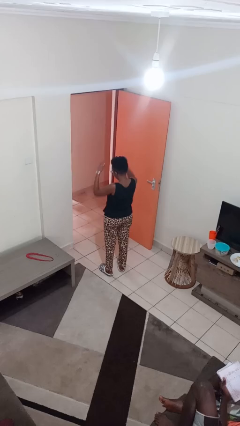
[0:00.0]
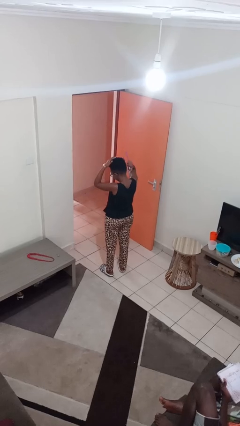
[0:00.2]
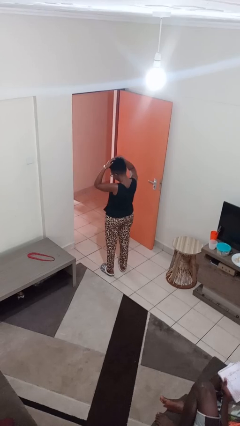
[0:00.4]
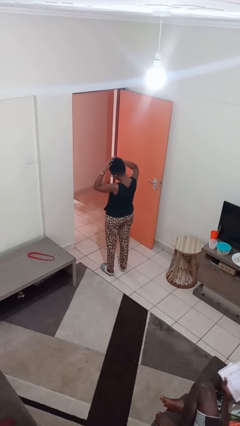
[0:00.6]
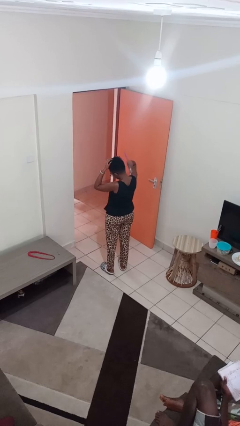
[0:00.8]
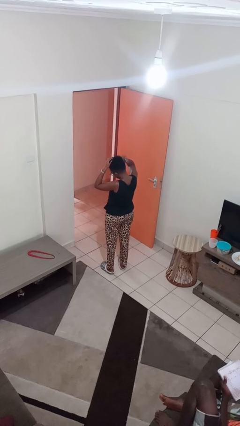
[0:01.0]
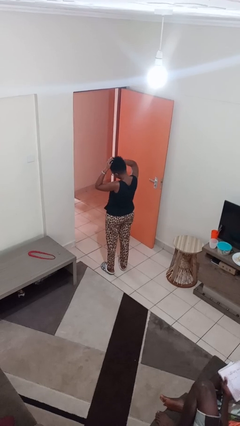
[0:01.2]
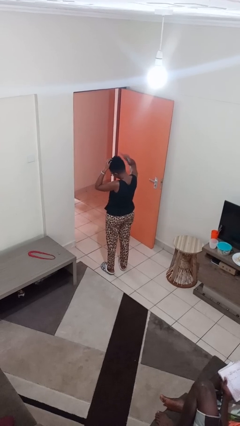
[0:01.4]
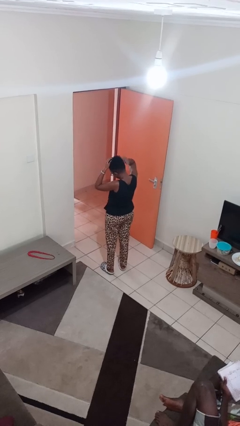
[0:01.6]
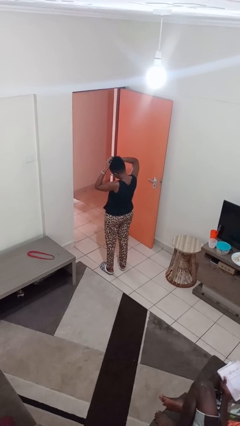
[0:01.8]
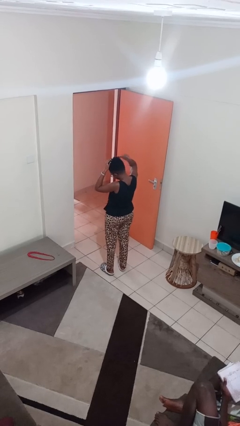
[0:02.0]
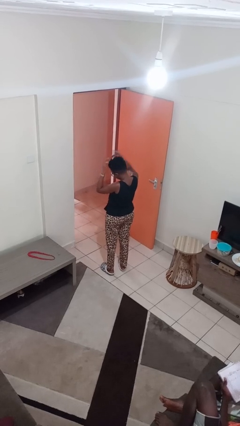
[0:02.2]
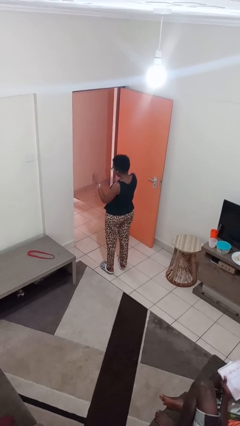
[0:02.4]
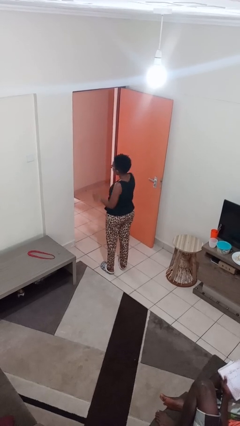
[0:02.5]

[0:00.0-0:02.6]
person brushes hair

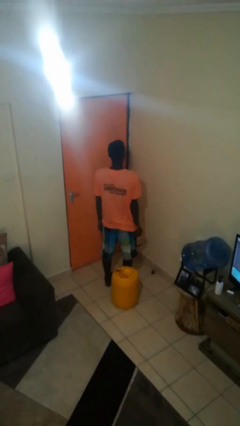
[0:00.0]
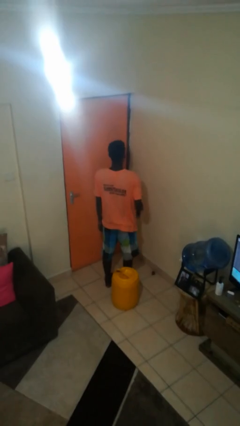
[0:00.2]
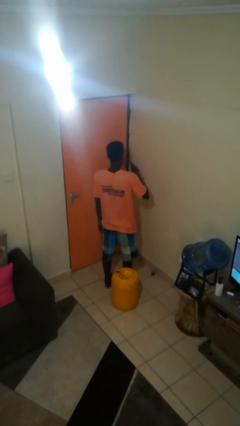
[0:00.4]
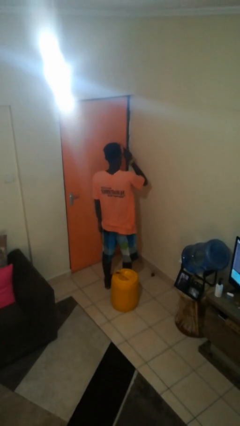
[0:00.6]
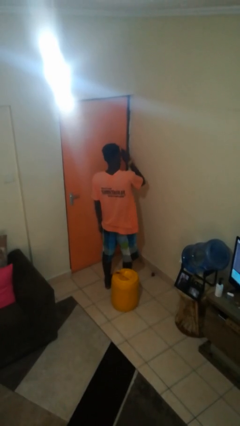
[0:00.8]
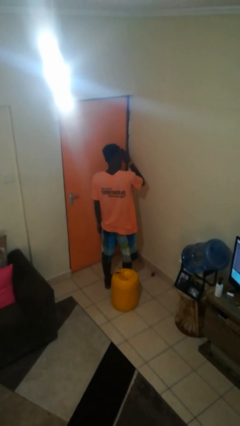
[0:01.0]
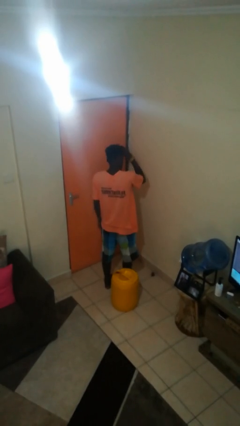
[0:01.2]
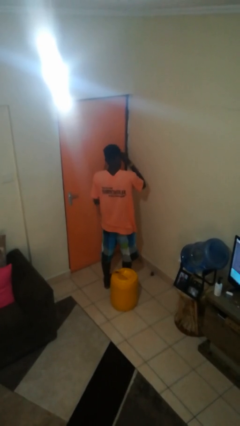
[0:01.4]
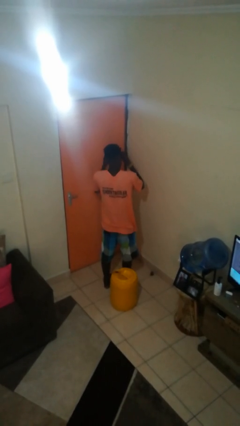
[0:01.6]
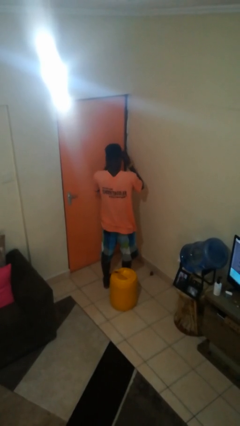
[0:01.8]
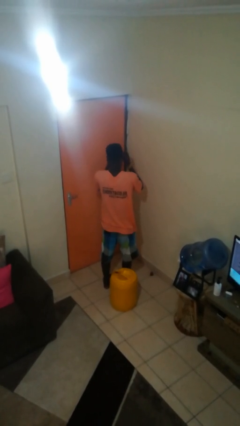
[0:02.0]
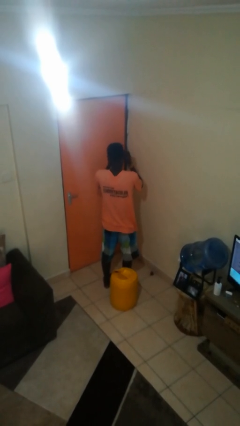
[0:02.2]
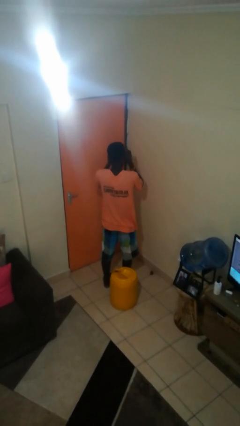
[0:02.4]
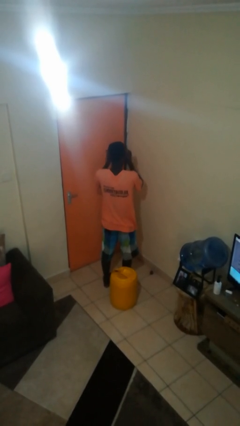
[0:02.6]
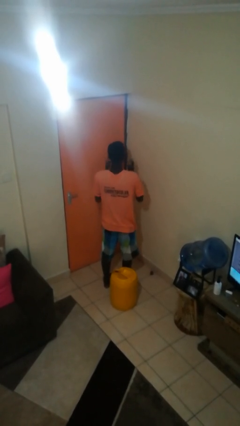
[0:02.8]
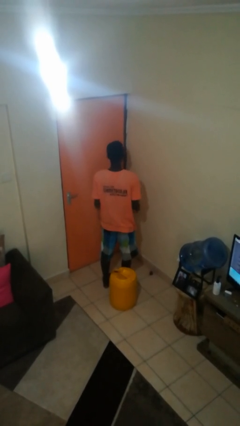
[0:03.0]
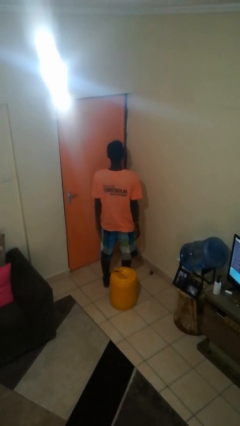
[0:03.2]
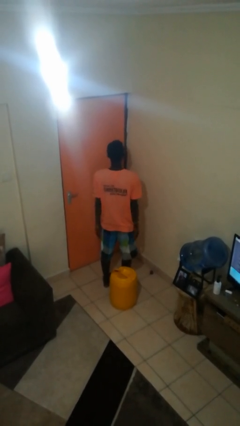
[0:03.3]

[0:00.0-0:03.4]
person puts on sunglasses

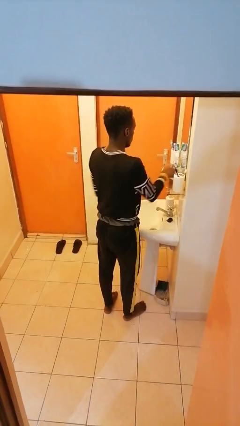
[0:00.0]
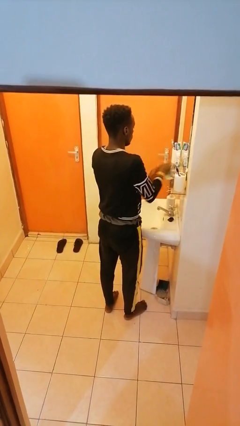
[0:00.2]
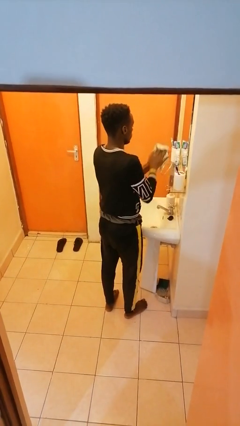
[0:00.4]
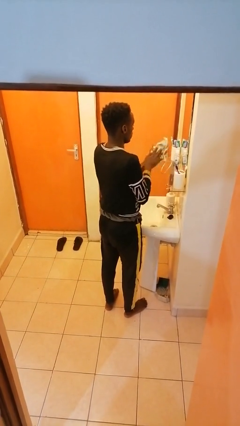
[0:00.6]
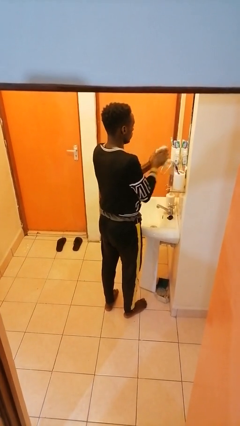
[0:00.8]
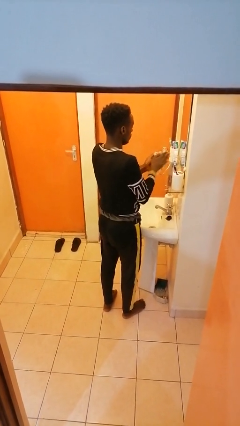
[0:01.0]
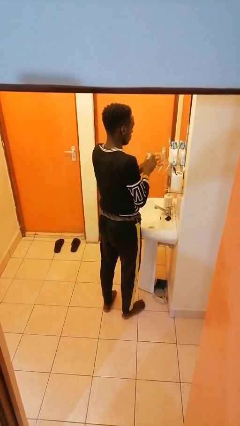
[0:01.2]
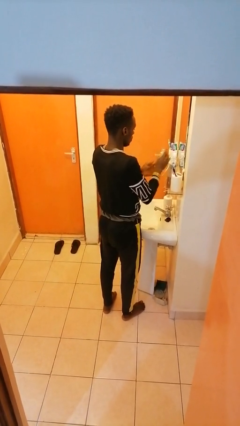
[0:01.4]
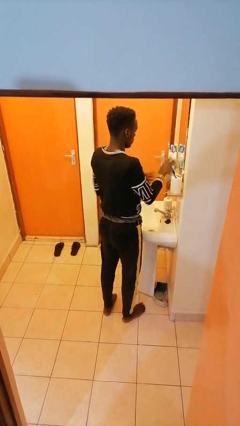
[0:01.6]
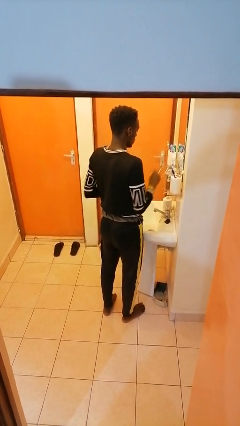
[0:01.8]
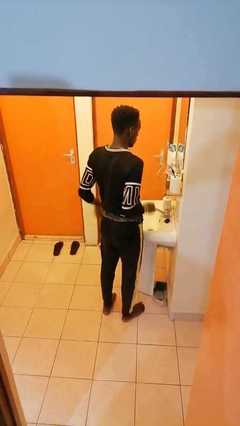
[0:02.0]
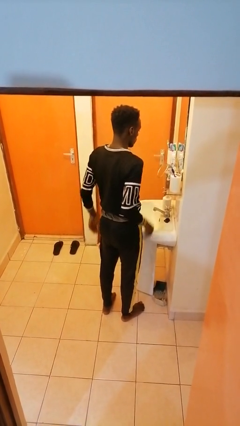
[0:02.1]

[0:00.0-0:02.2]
person dries hands with towel

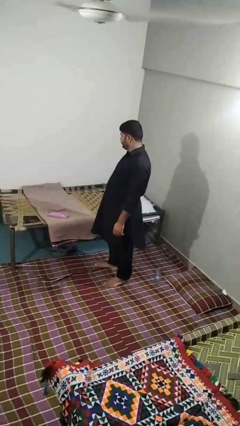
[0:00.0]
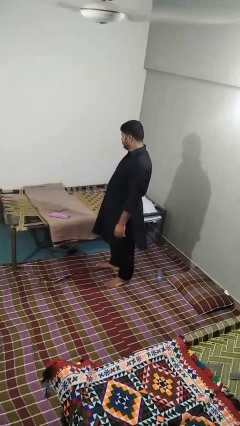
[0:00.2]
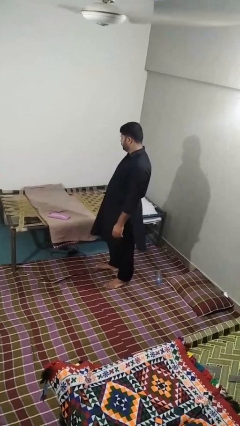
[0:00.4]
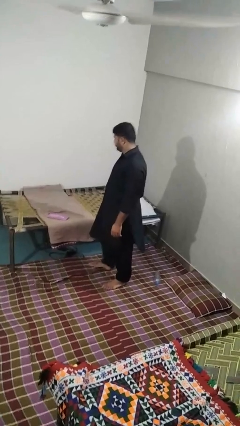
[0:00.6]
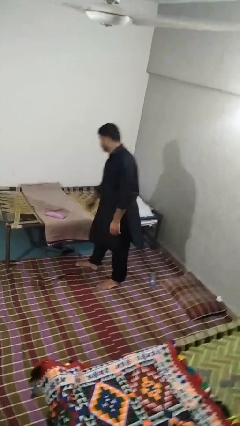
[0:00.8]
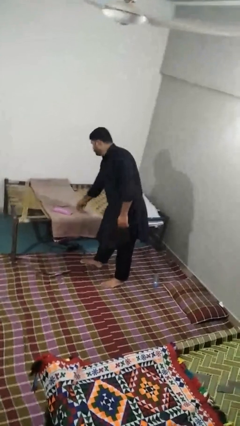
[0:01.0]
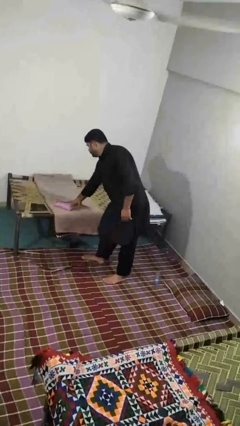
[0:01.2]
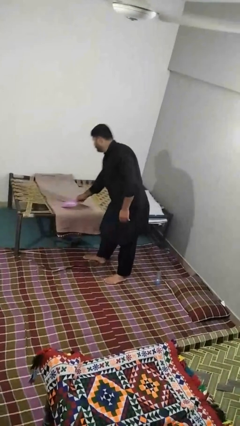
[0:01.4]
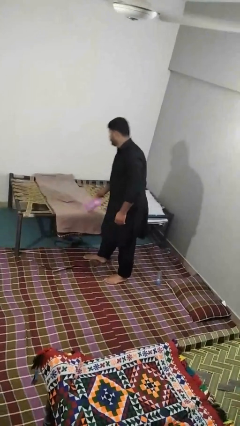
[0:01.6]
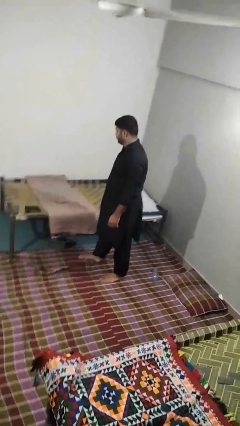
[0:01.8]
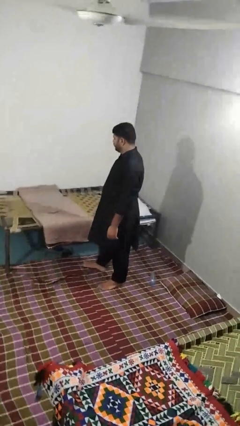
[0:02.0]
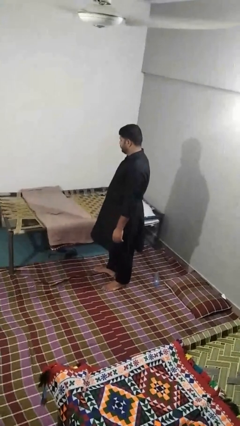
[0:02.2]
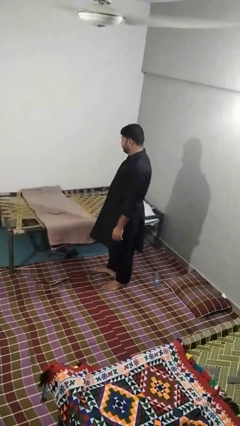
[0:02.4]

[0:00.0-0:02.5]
person picks up object from bed

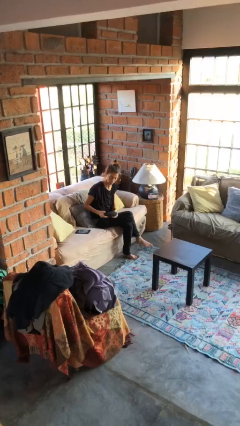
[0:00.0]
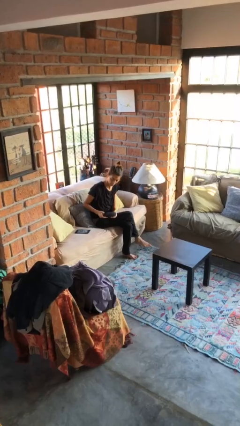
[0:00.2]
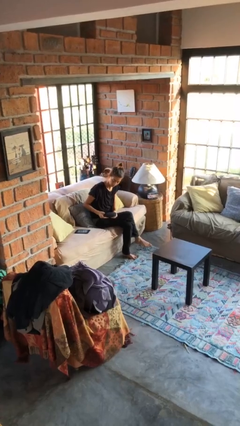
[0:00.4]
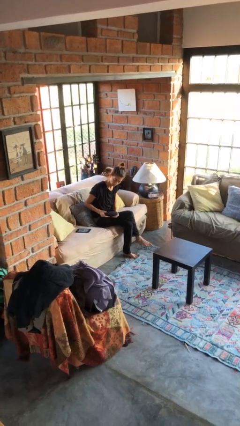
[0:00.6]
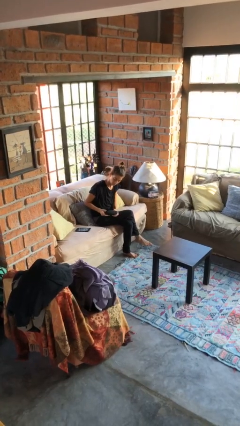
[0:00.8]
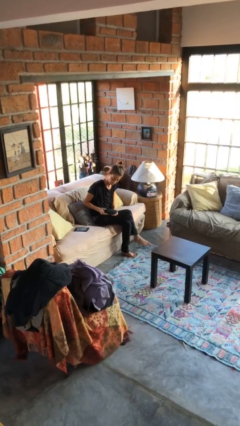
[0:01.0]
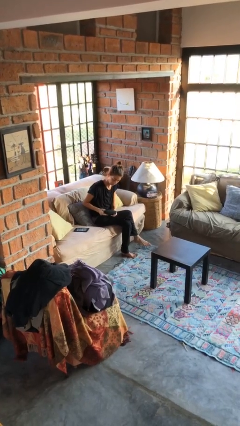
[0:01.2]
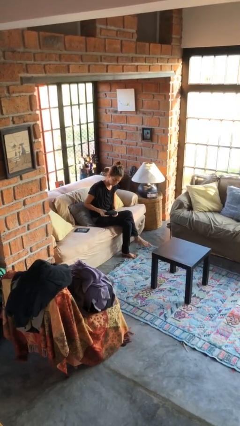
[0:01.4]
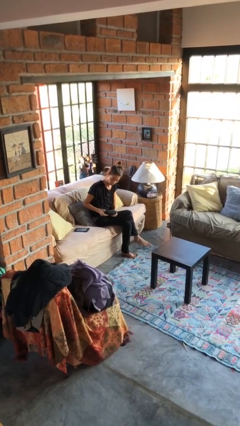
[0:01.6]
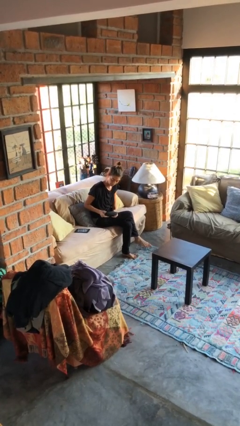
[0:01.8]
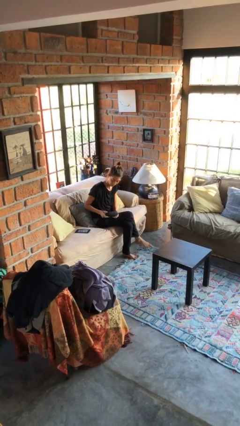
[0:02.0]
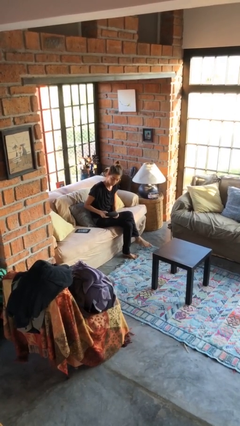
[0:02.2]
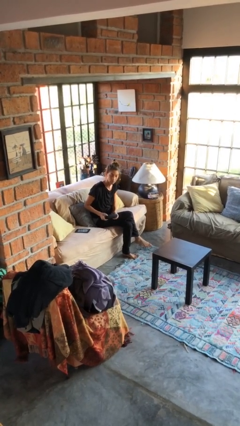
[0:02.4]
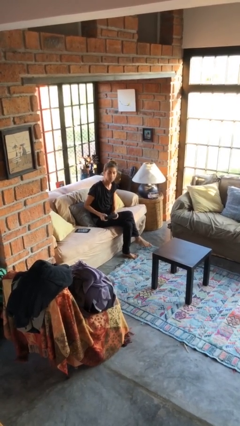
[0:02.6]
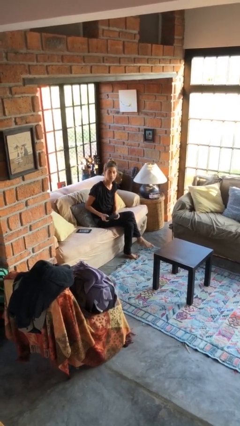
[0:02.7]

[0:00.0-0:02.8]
person interacts with handheld game

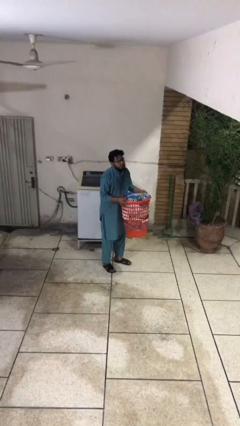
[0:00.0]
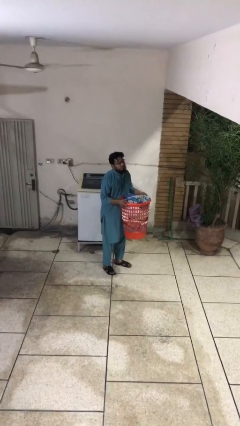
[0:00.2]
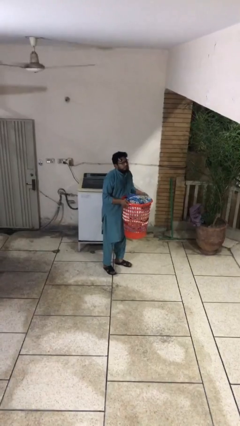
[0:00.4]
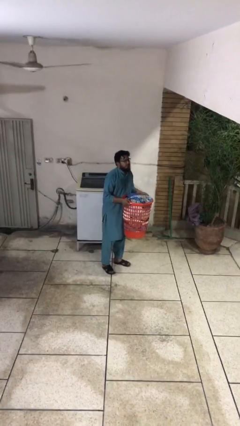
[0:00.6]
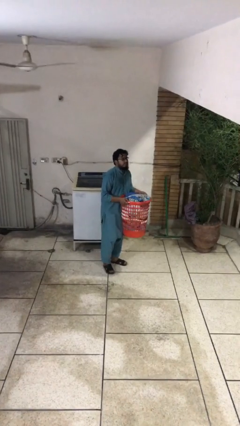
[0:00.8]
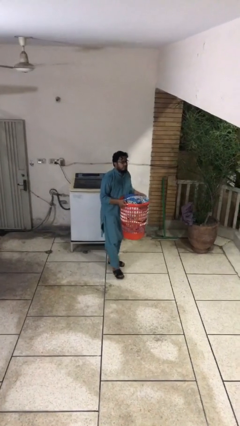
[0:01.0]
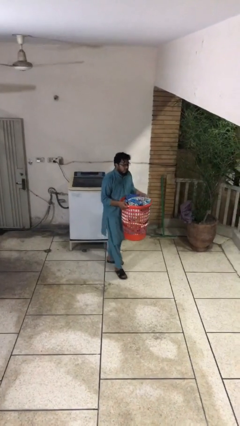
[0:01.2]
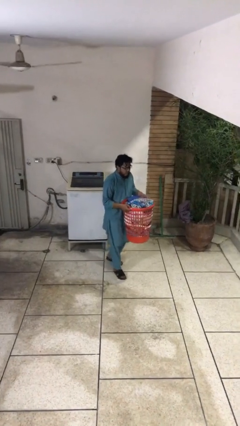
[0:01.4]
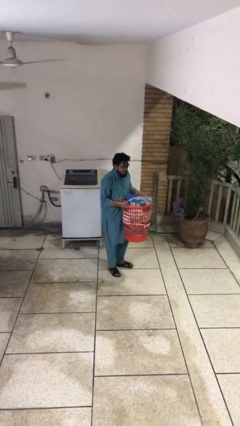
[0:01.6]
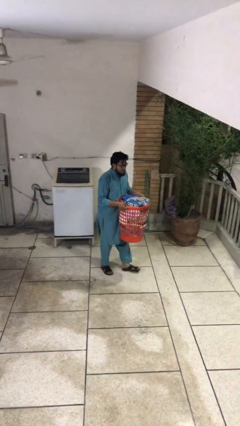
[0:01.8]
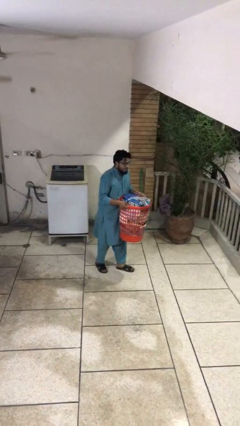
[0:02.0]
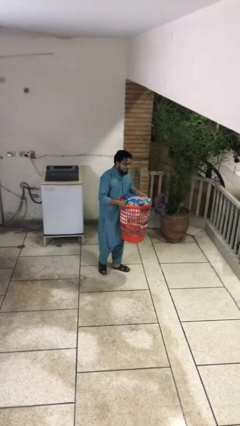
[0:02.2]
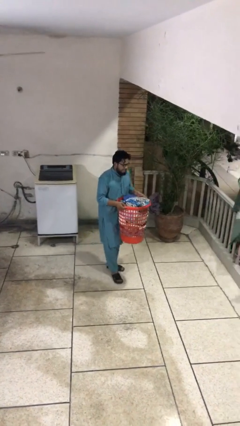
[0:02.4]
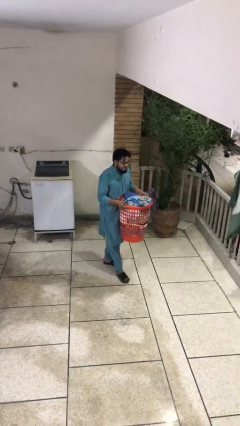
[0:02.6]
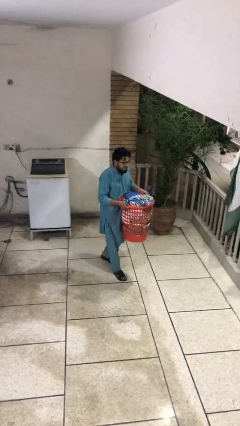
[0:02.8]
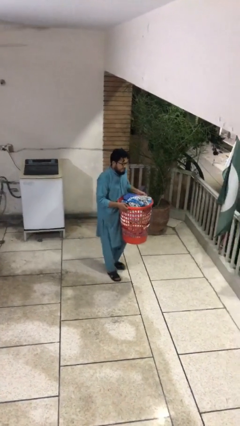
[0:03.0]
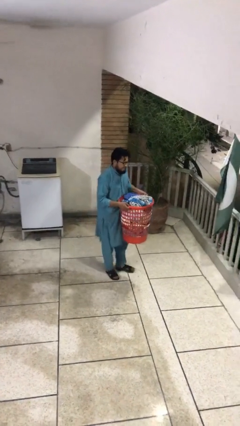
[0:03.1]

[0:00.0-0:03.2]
person carries heavy object

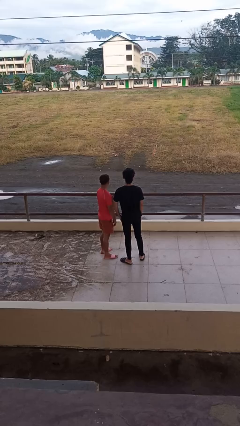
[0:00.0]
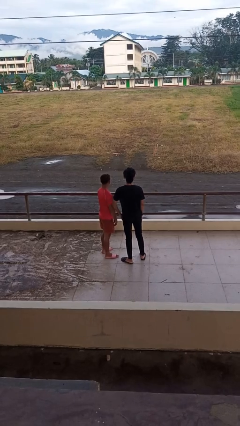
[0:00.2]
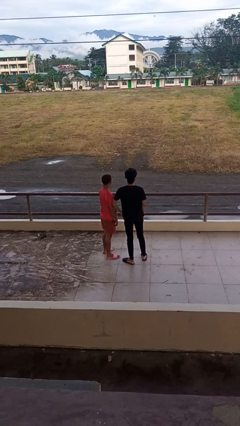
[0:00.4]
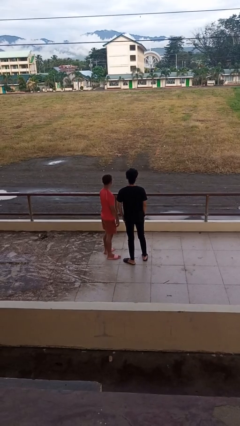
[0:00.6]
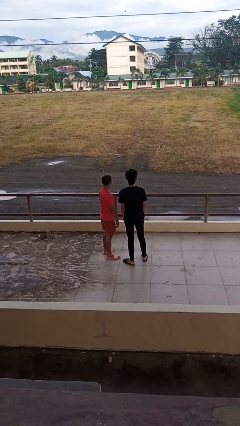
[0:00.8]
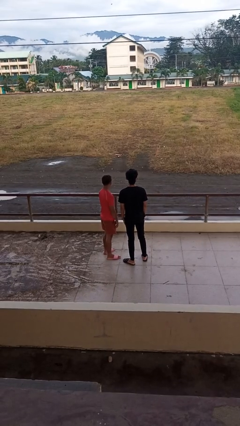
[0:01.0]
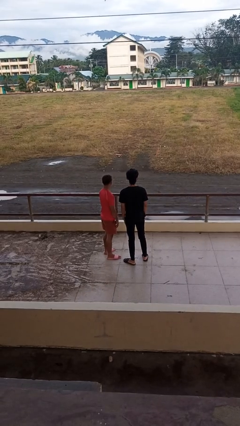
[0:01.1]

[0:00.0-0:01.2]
person nudges person with elbow
